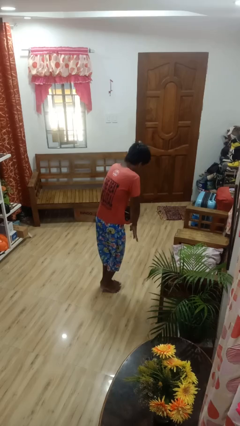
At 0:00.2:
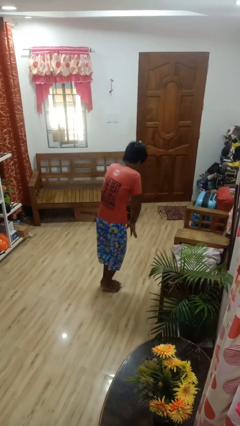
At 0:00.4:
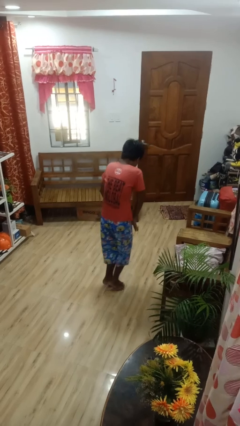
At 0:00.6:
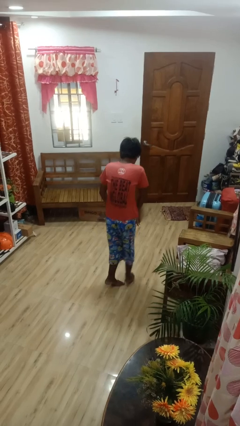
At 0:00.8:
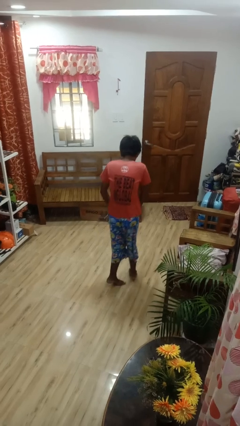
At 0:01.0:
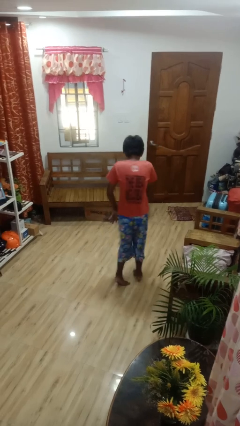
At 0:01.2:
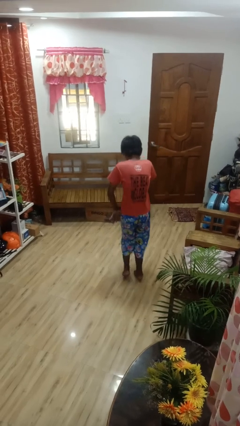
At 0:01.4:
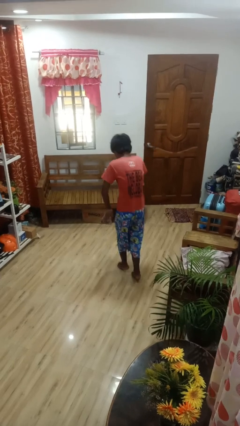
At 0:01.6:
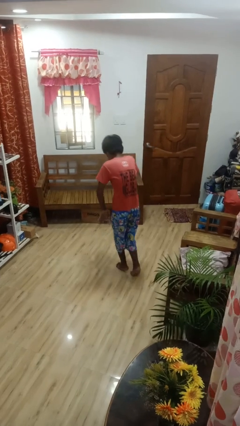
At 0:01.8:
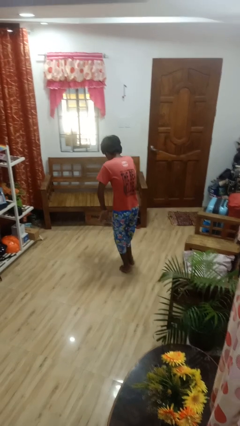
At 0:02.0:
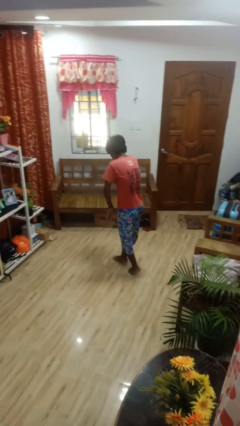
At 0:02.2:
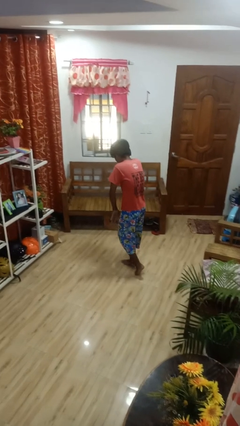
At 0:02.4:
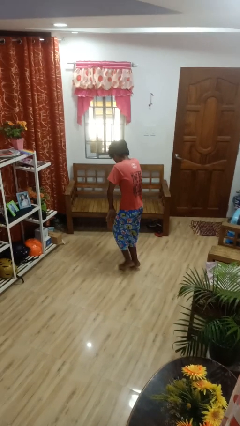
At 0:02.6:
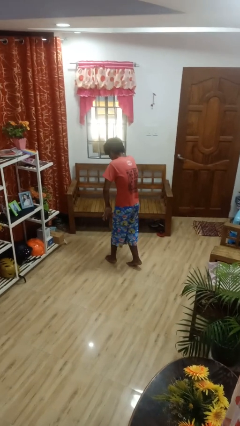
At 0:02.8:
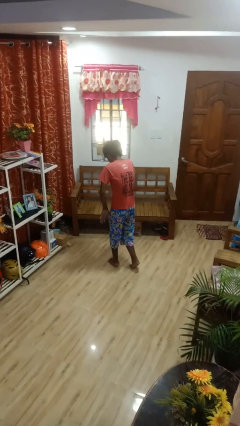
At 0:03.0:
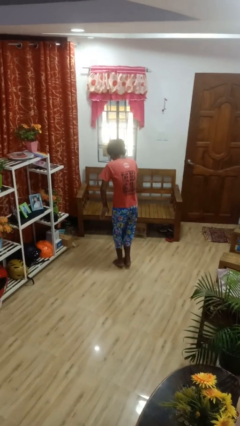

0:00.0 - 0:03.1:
person walks tiptoe

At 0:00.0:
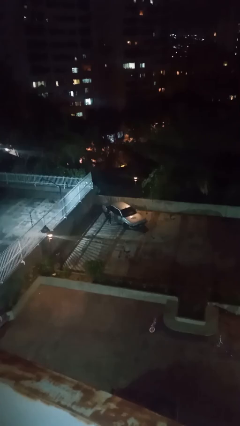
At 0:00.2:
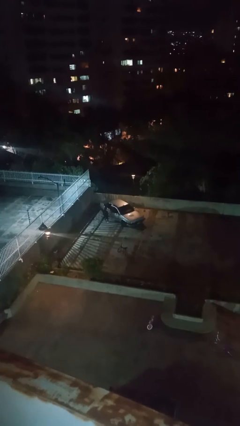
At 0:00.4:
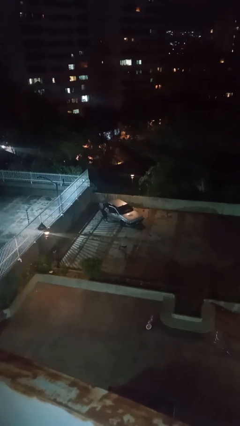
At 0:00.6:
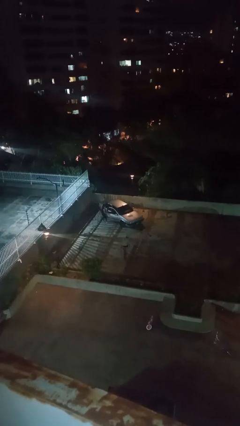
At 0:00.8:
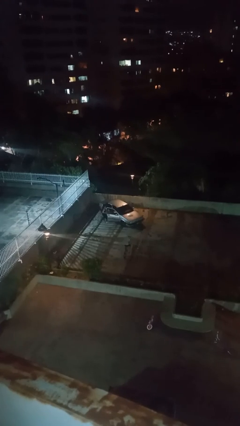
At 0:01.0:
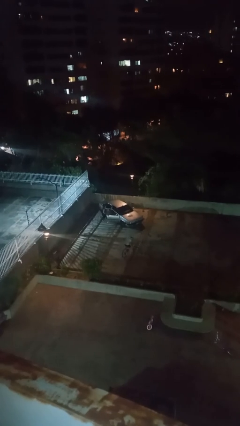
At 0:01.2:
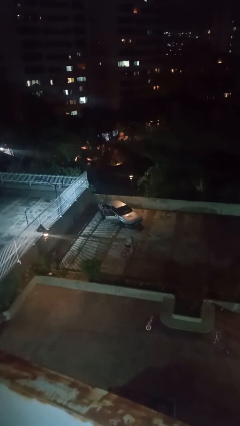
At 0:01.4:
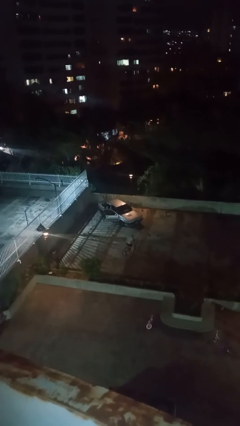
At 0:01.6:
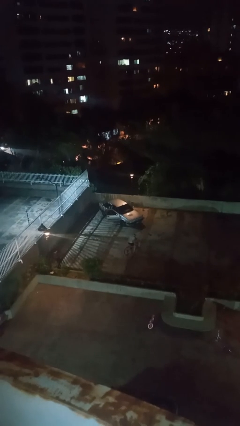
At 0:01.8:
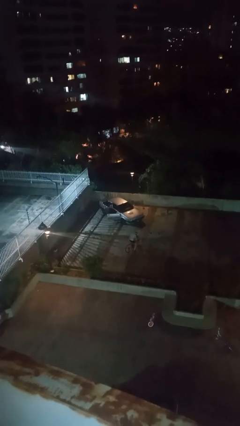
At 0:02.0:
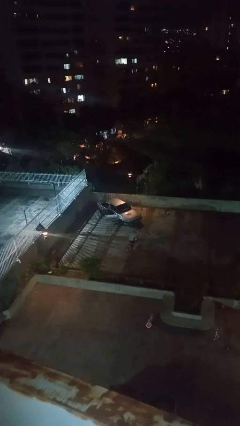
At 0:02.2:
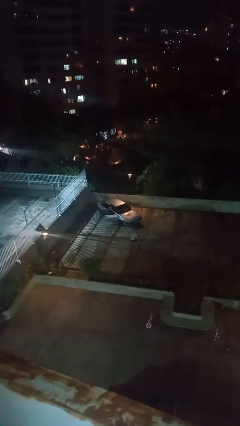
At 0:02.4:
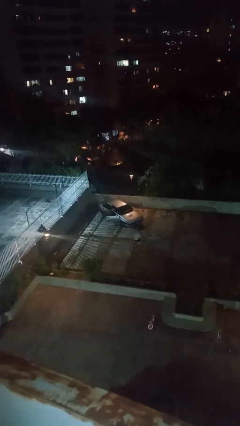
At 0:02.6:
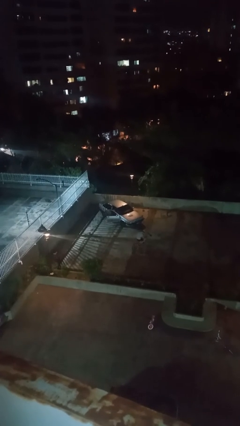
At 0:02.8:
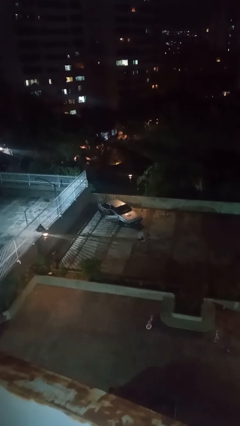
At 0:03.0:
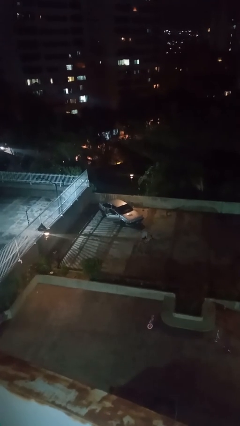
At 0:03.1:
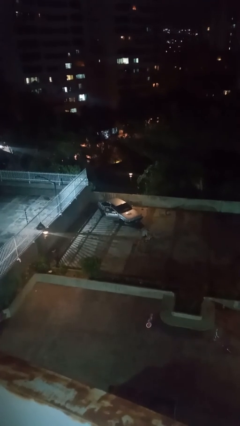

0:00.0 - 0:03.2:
car picks up person

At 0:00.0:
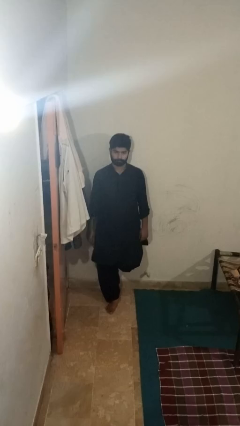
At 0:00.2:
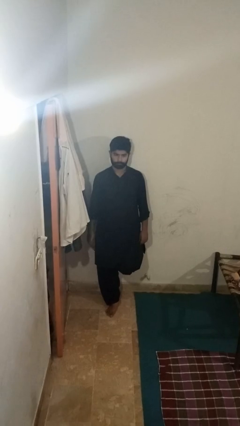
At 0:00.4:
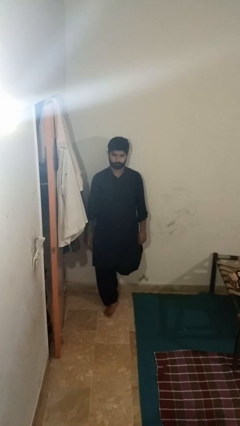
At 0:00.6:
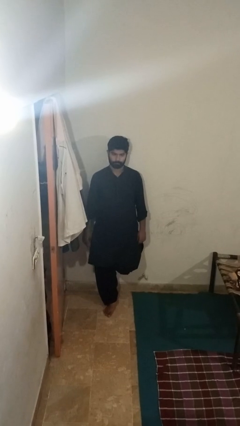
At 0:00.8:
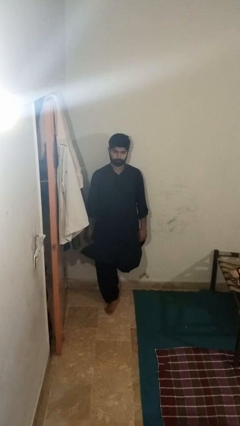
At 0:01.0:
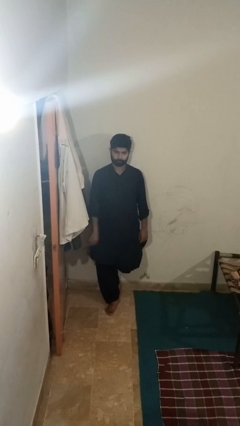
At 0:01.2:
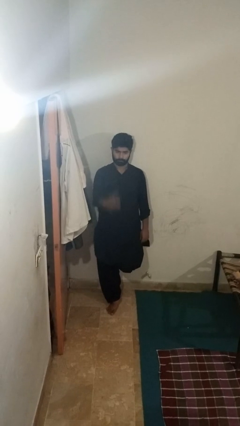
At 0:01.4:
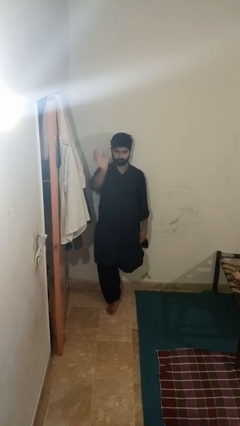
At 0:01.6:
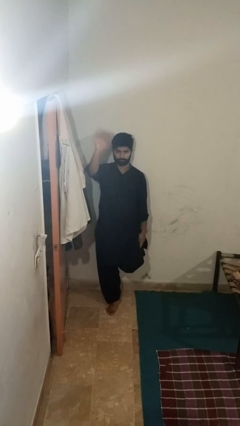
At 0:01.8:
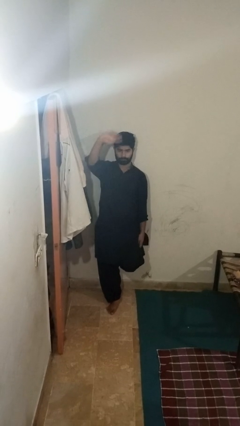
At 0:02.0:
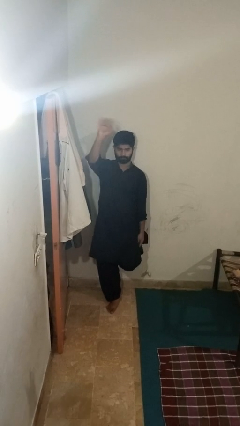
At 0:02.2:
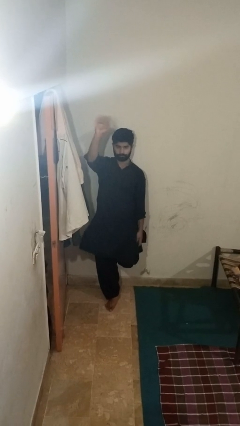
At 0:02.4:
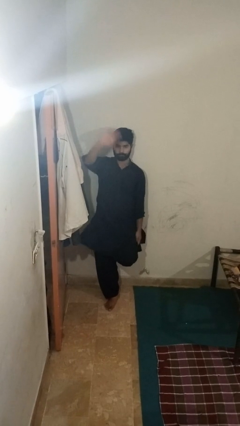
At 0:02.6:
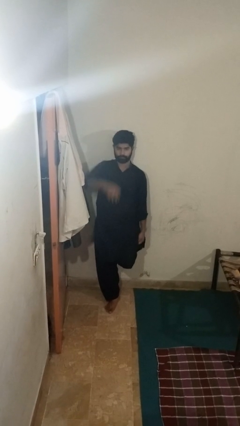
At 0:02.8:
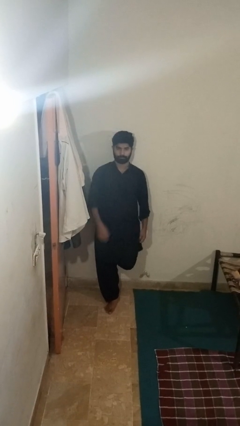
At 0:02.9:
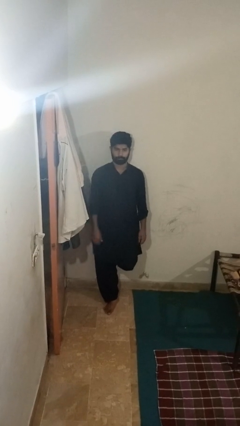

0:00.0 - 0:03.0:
person waves at person

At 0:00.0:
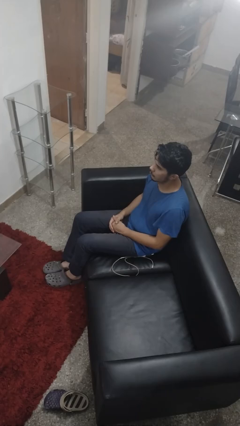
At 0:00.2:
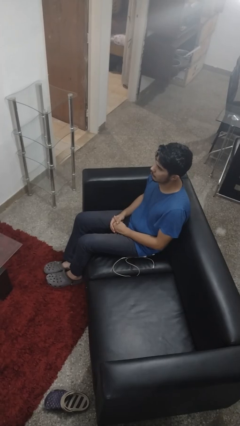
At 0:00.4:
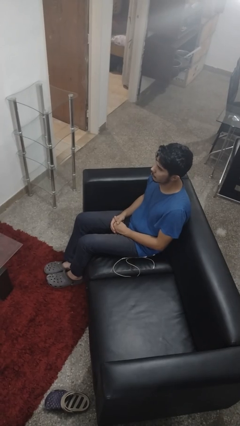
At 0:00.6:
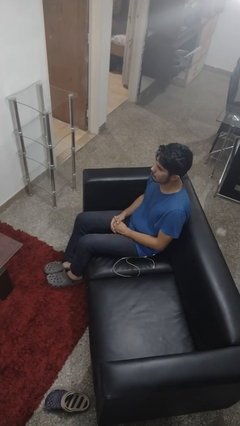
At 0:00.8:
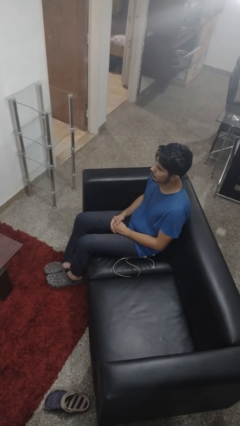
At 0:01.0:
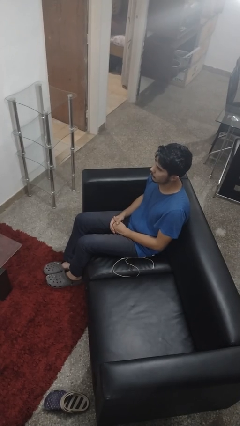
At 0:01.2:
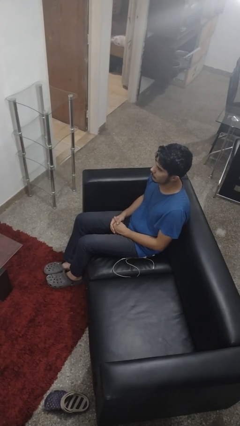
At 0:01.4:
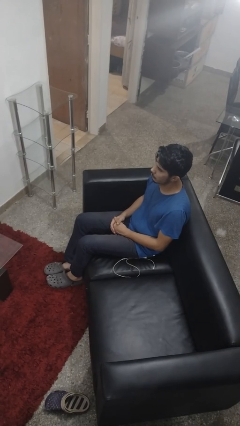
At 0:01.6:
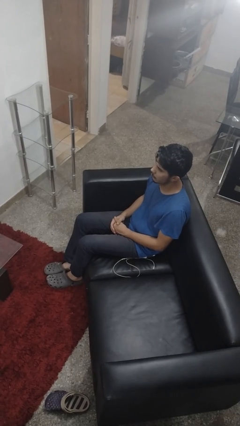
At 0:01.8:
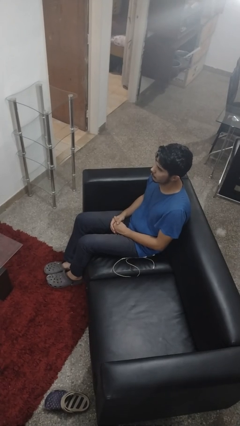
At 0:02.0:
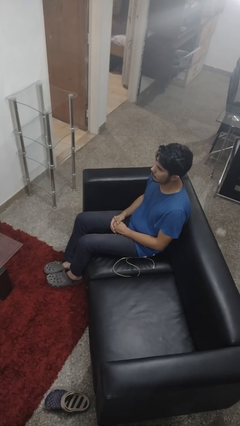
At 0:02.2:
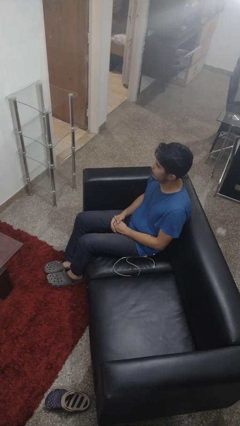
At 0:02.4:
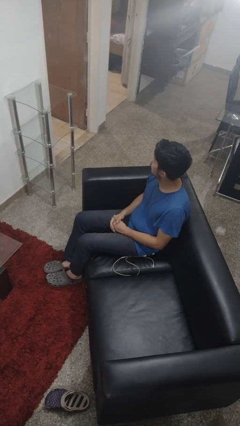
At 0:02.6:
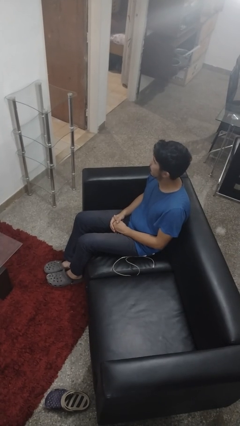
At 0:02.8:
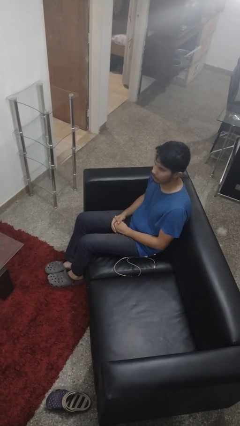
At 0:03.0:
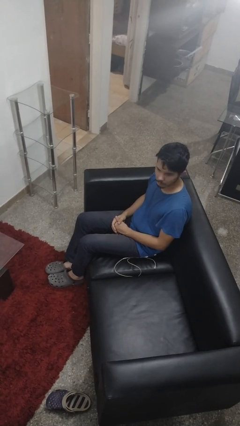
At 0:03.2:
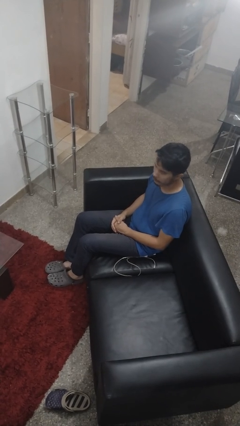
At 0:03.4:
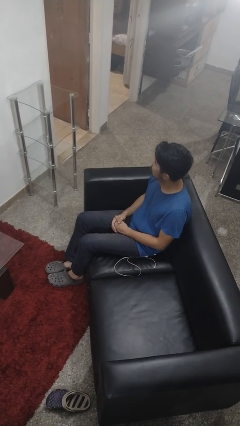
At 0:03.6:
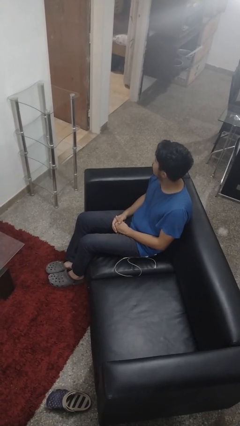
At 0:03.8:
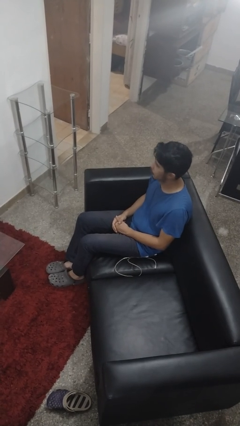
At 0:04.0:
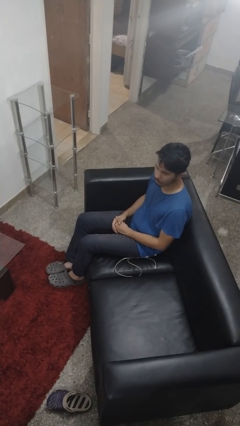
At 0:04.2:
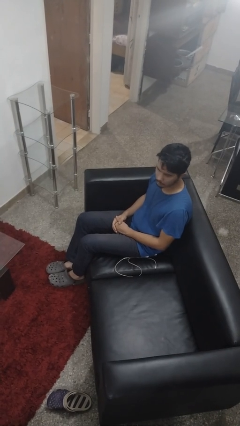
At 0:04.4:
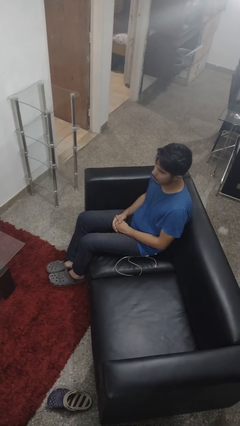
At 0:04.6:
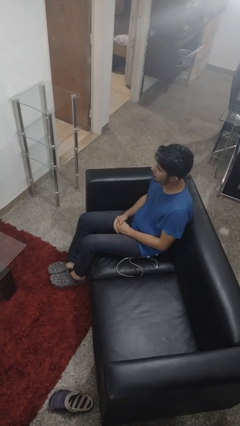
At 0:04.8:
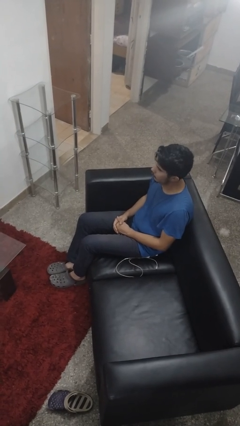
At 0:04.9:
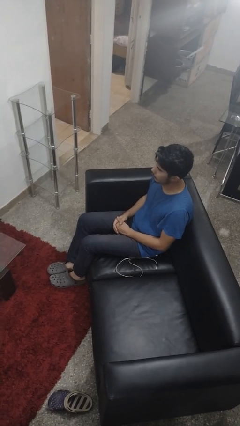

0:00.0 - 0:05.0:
person shakes head

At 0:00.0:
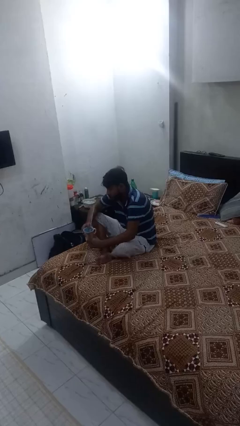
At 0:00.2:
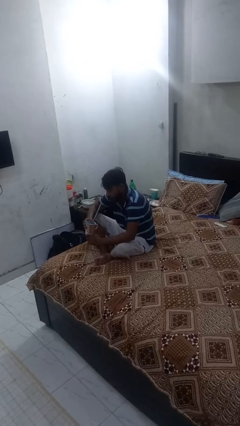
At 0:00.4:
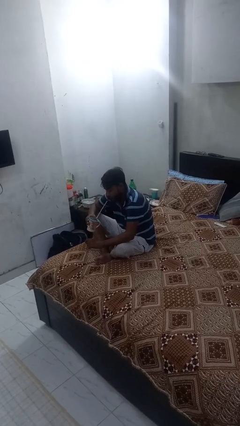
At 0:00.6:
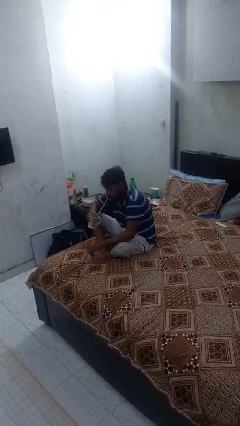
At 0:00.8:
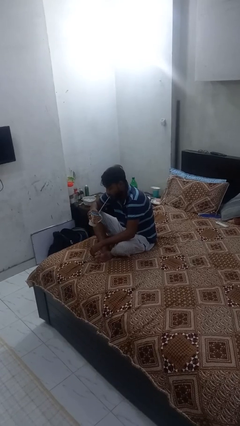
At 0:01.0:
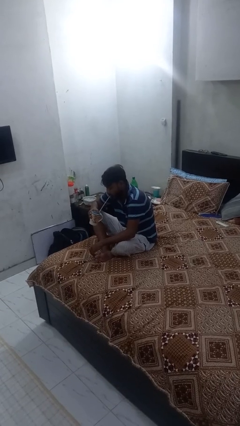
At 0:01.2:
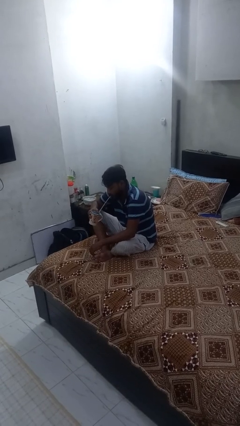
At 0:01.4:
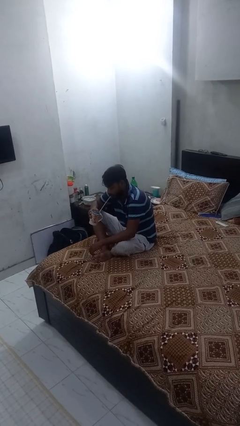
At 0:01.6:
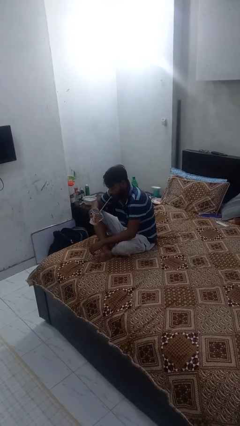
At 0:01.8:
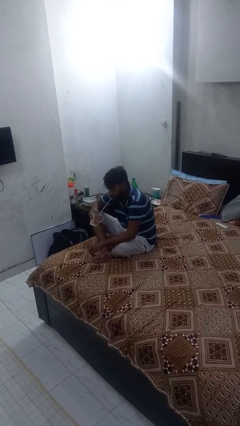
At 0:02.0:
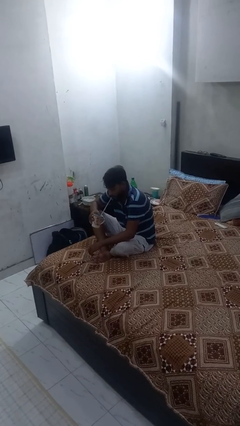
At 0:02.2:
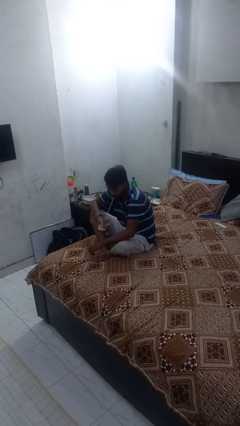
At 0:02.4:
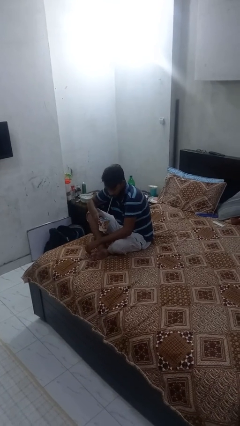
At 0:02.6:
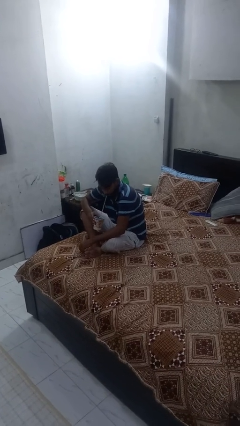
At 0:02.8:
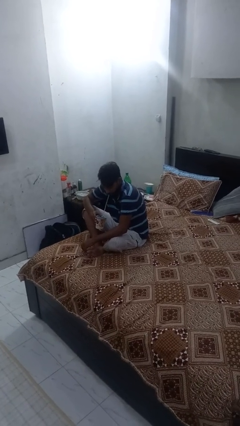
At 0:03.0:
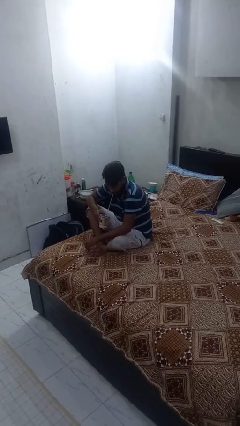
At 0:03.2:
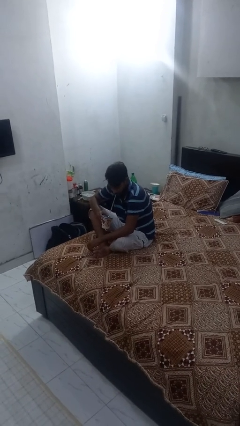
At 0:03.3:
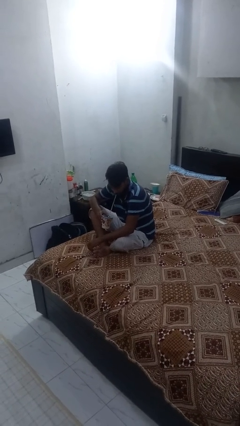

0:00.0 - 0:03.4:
person drinks from straw
